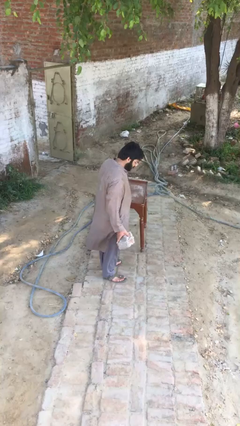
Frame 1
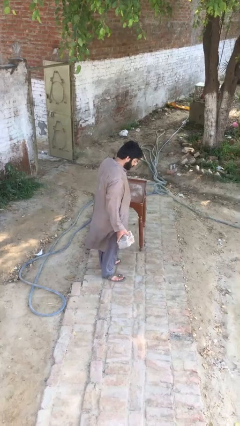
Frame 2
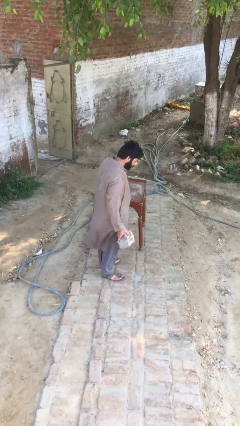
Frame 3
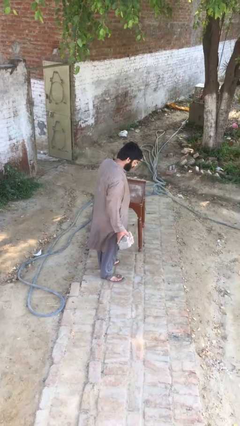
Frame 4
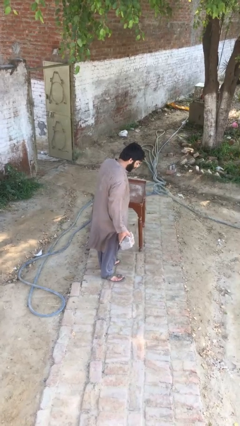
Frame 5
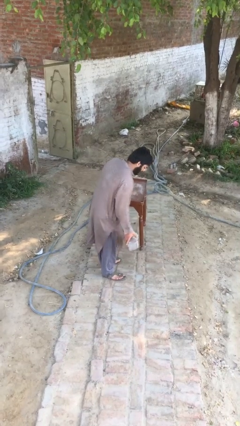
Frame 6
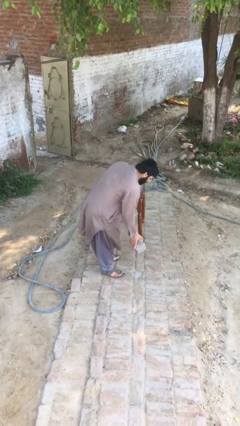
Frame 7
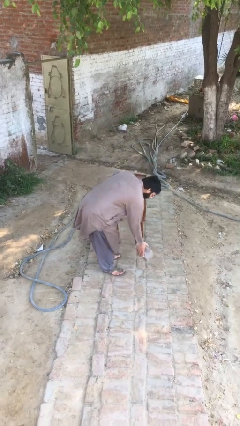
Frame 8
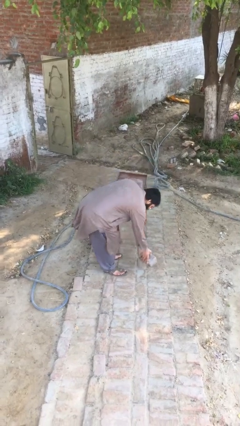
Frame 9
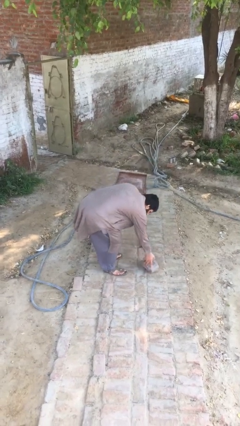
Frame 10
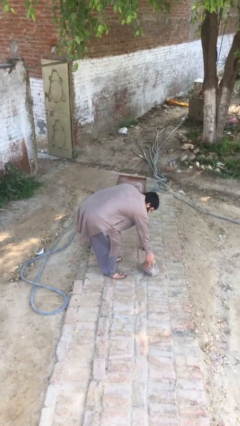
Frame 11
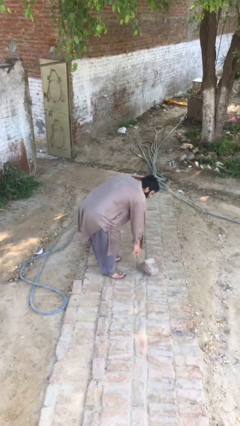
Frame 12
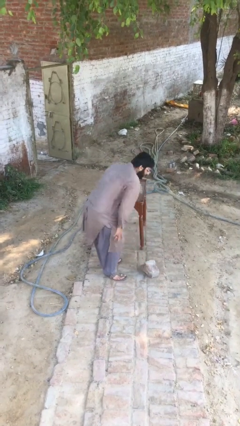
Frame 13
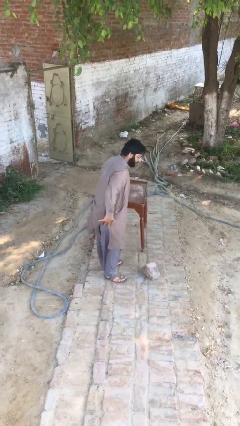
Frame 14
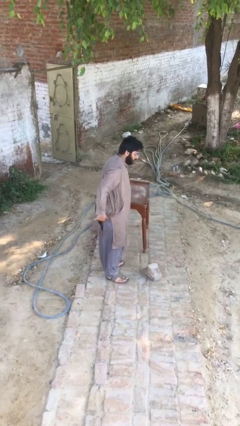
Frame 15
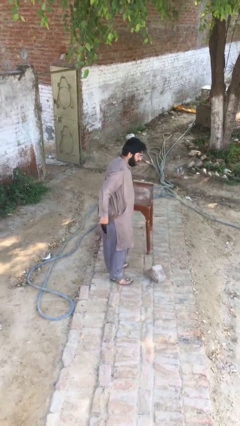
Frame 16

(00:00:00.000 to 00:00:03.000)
person puts down object on floor

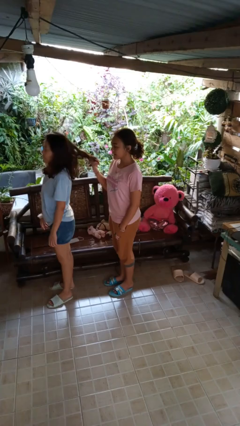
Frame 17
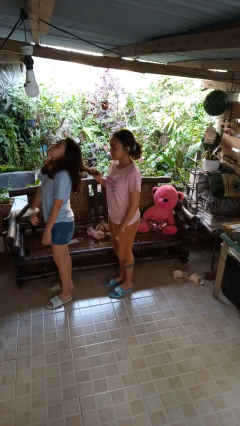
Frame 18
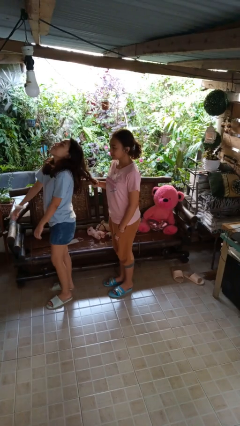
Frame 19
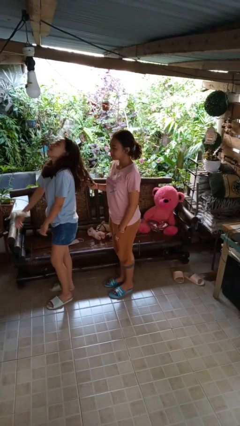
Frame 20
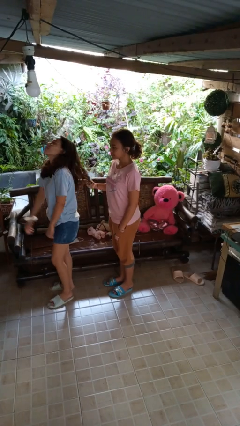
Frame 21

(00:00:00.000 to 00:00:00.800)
person grabs person by hair

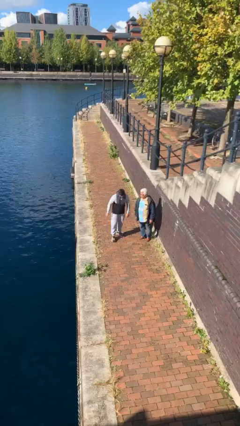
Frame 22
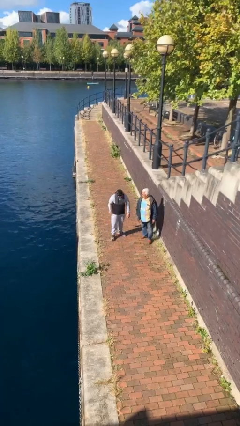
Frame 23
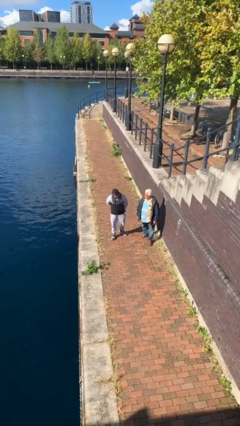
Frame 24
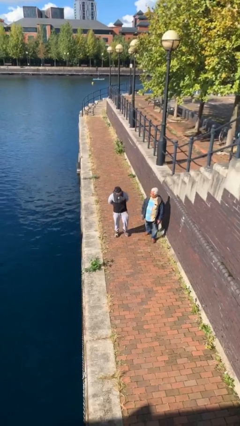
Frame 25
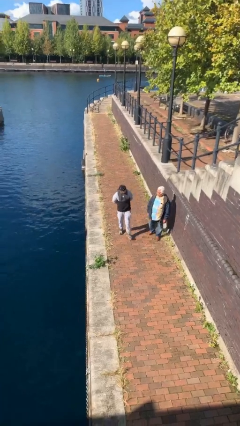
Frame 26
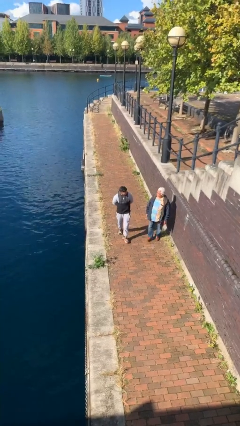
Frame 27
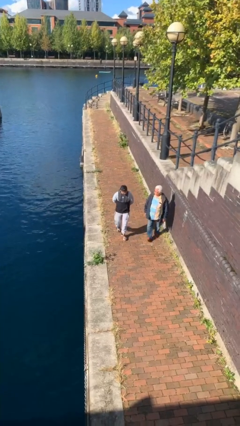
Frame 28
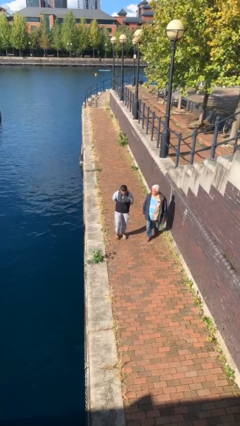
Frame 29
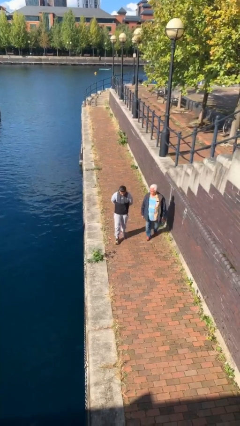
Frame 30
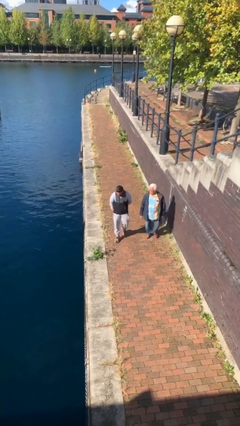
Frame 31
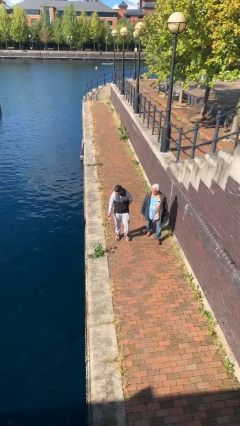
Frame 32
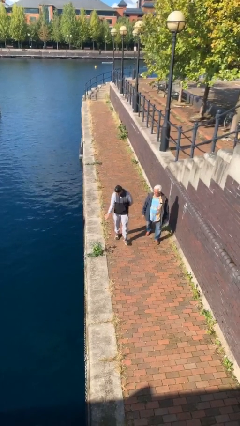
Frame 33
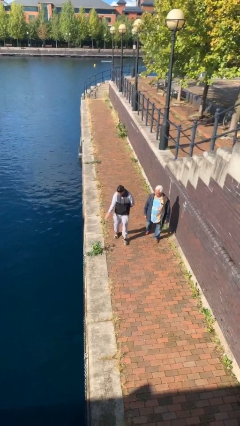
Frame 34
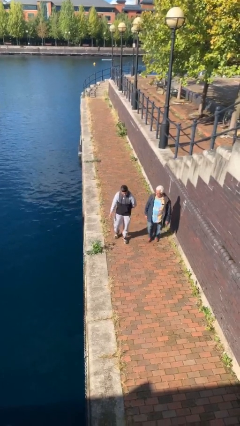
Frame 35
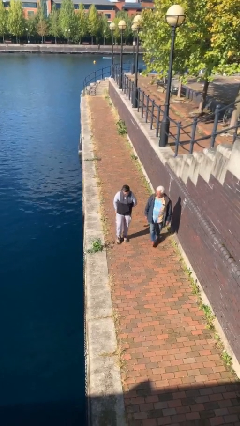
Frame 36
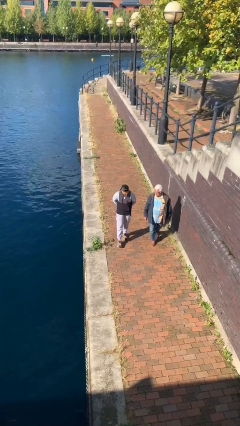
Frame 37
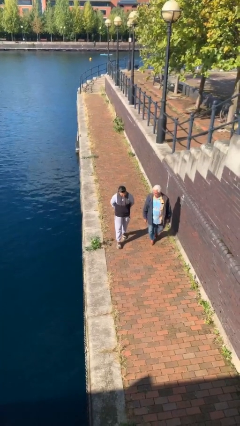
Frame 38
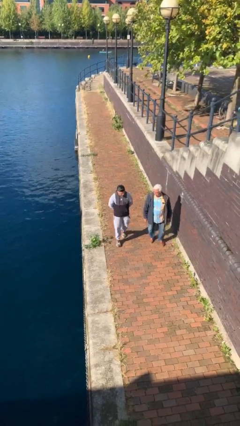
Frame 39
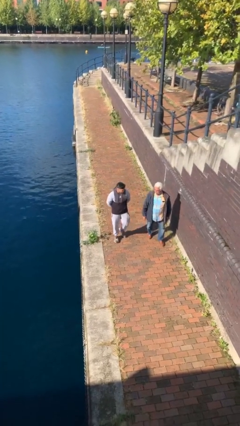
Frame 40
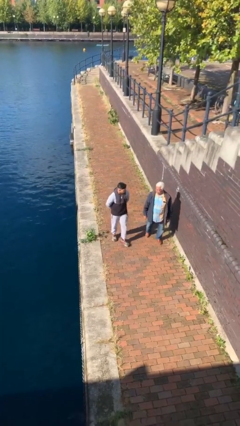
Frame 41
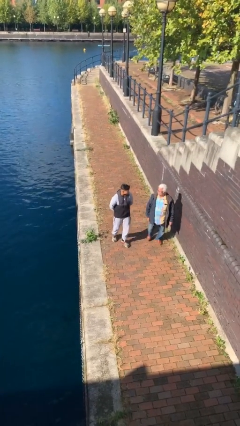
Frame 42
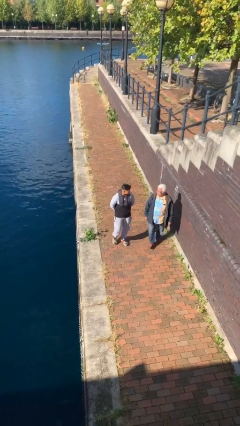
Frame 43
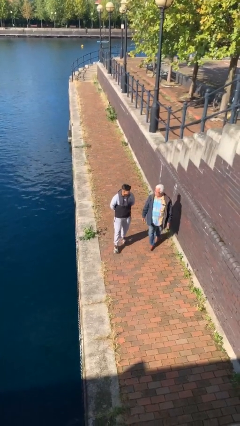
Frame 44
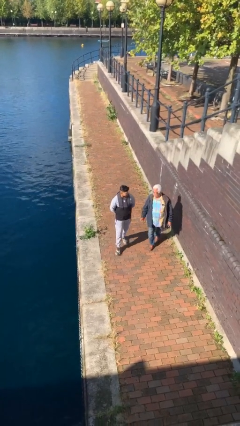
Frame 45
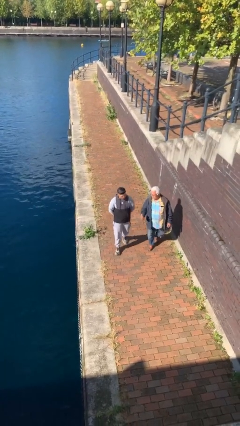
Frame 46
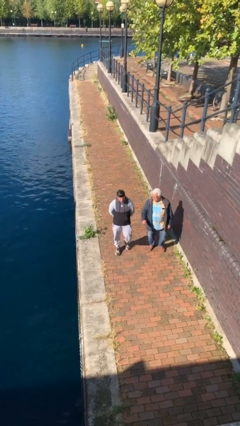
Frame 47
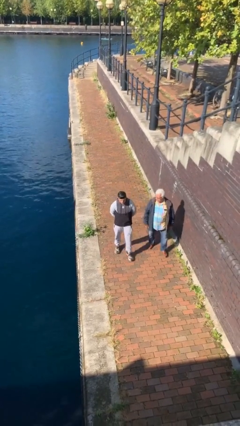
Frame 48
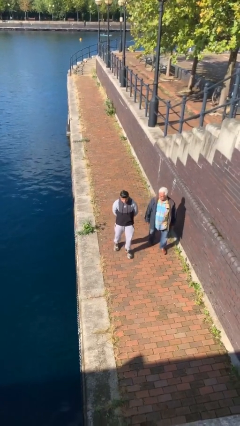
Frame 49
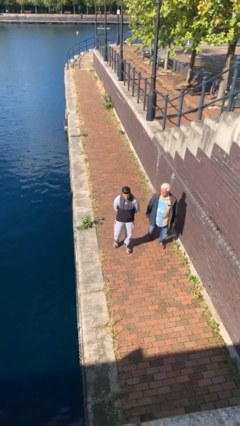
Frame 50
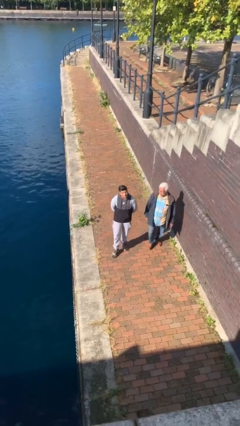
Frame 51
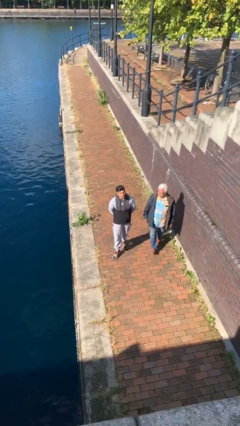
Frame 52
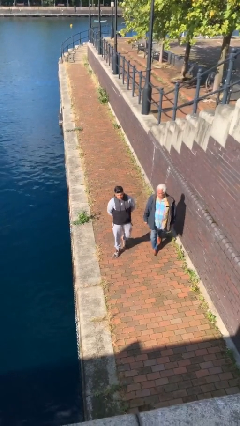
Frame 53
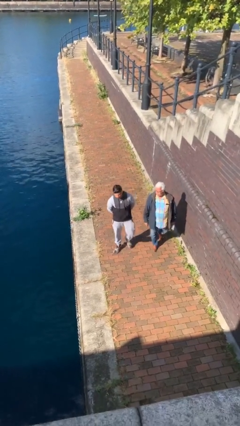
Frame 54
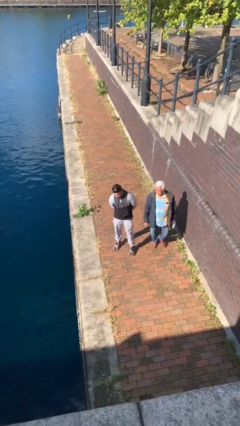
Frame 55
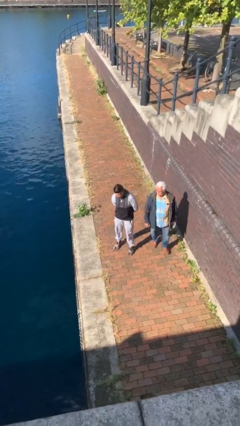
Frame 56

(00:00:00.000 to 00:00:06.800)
person talks to person

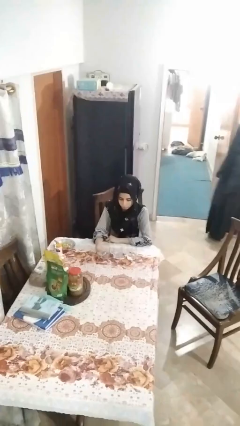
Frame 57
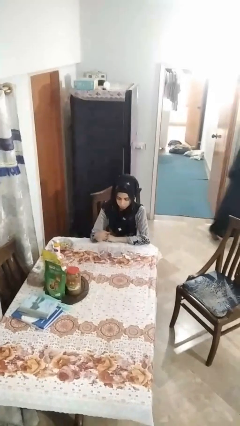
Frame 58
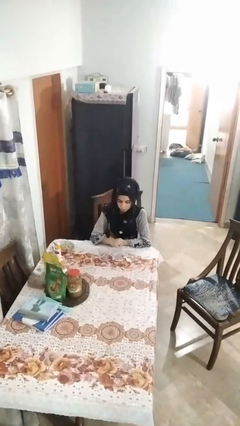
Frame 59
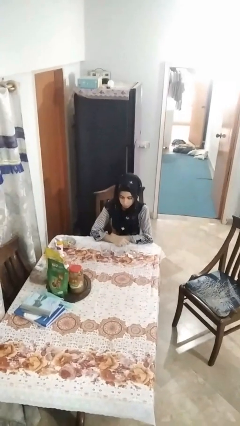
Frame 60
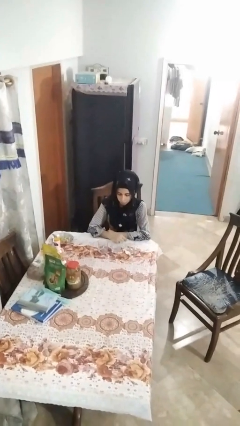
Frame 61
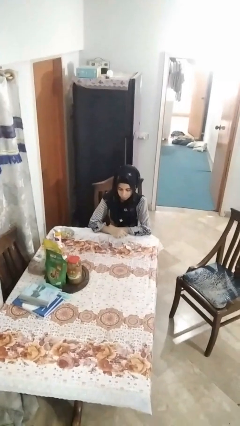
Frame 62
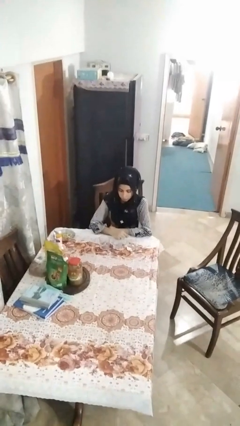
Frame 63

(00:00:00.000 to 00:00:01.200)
person puts down object on table

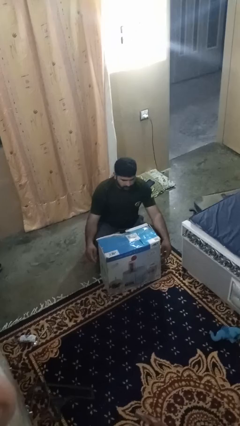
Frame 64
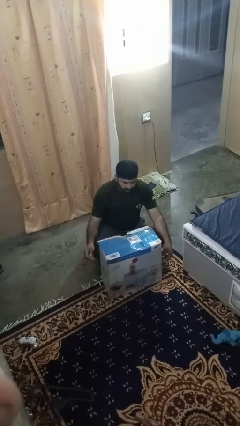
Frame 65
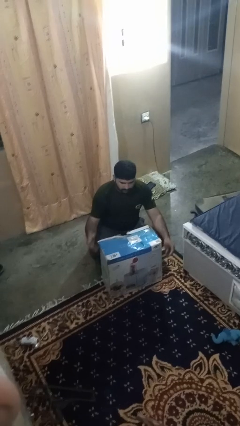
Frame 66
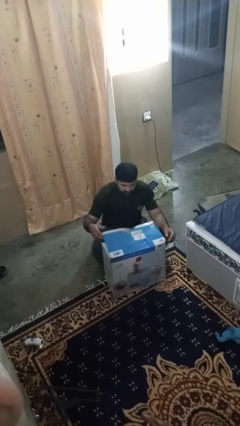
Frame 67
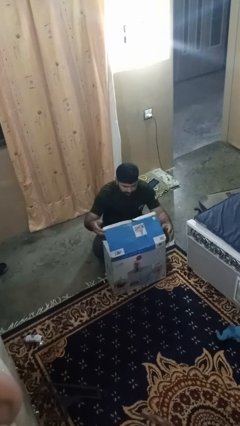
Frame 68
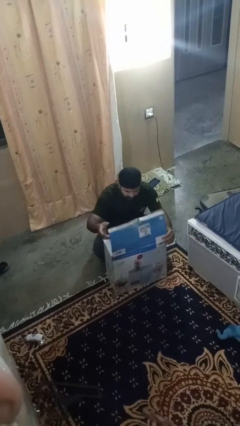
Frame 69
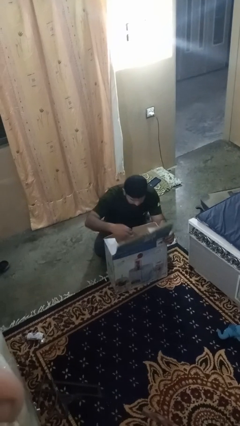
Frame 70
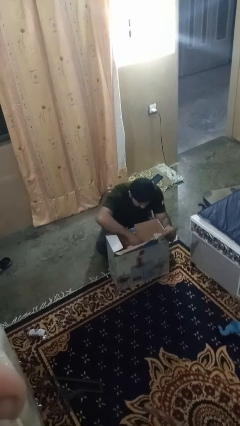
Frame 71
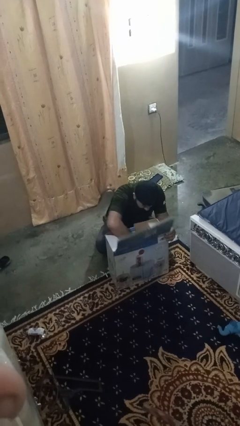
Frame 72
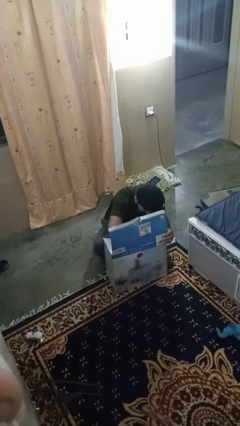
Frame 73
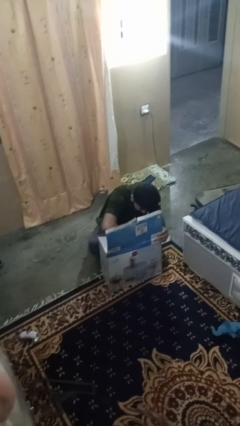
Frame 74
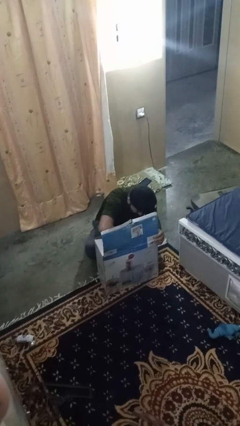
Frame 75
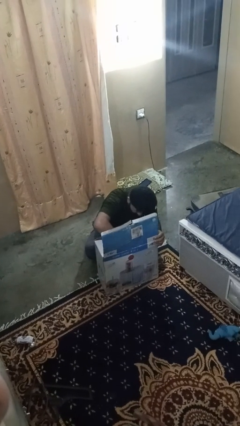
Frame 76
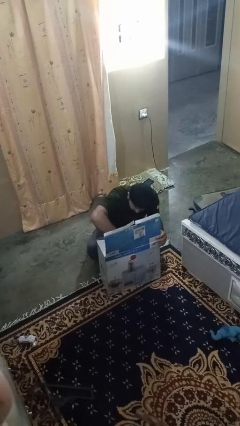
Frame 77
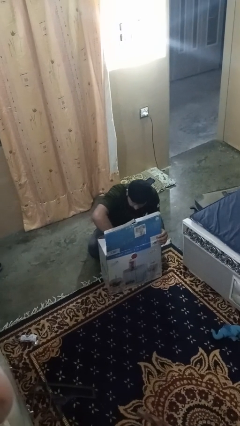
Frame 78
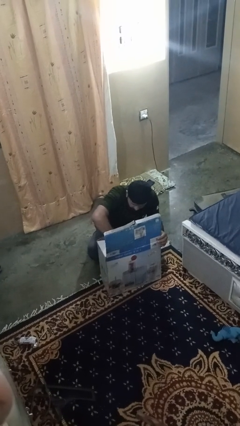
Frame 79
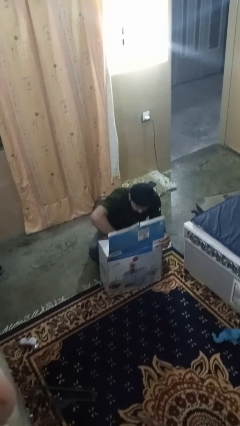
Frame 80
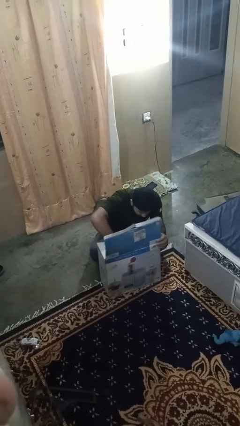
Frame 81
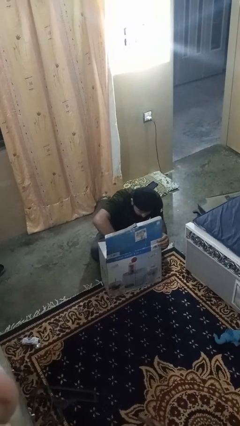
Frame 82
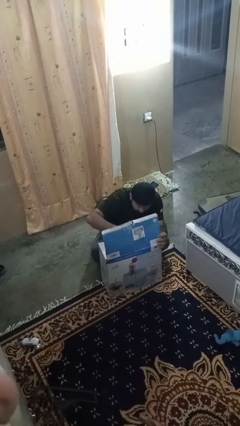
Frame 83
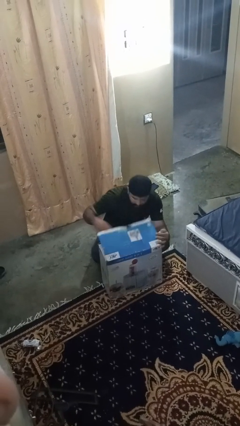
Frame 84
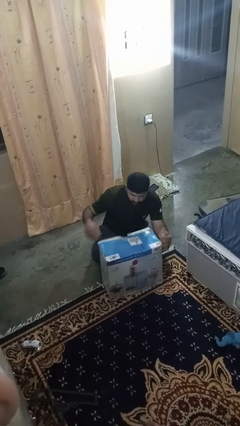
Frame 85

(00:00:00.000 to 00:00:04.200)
person searches in box

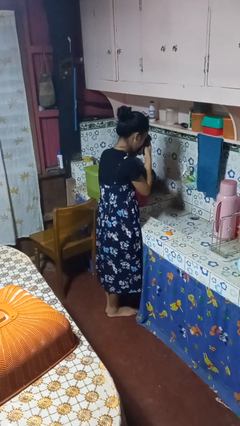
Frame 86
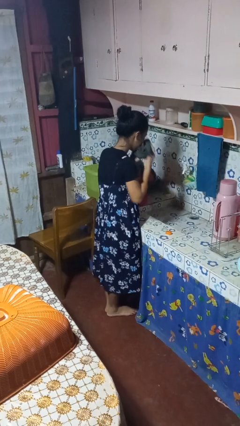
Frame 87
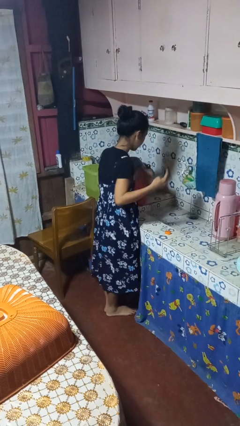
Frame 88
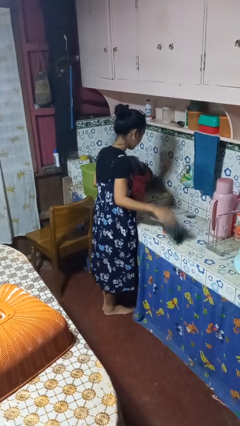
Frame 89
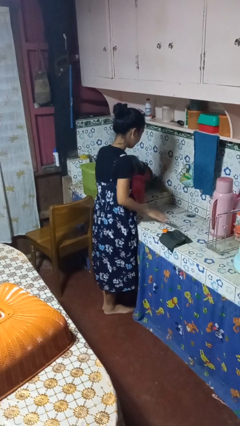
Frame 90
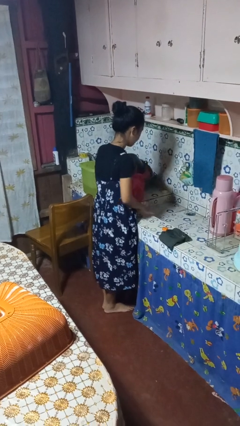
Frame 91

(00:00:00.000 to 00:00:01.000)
person dries face with towel

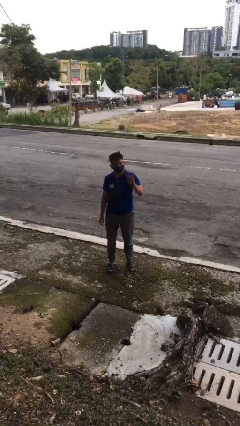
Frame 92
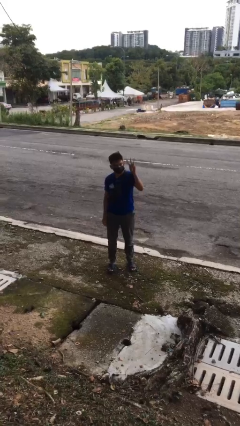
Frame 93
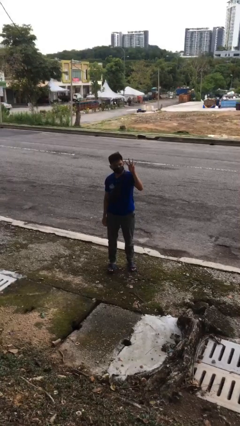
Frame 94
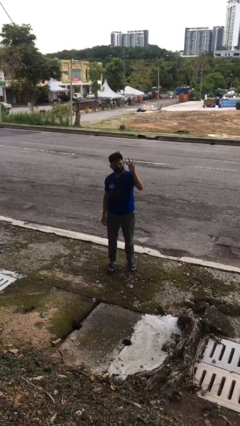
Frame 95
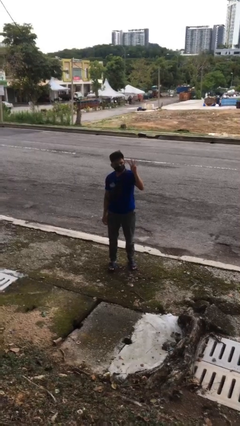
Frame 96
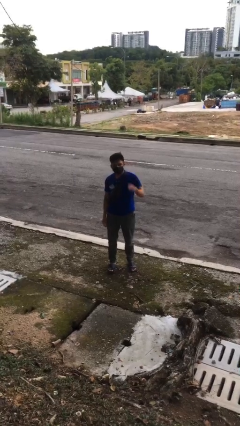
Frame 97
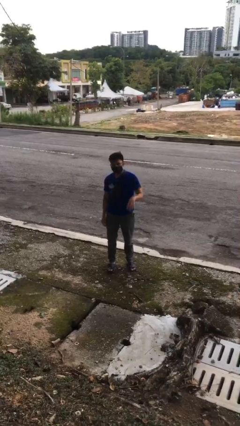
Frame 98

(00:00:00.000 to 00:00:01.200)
person gestures number four
